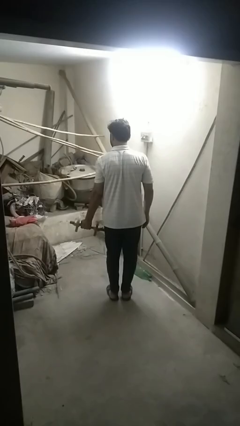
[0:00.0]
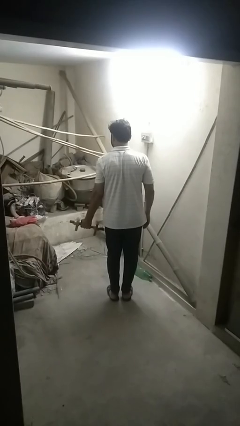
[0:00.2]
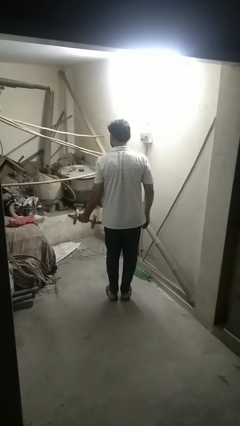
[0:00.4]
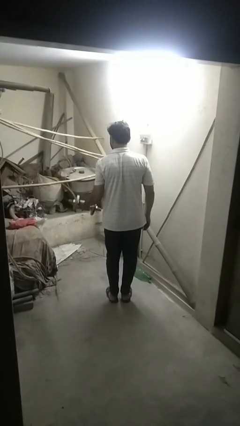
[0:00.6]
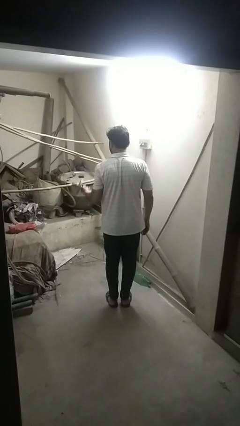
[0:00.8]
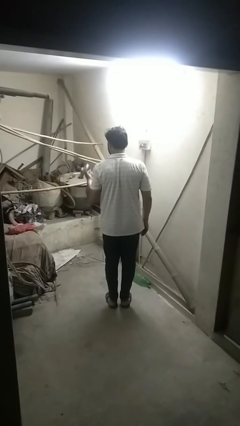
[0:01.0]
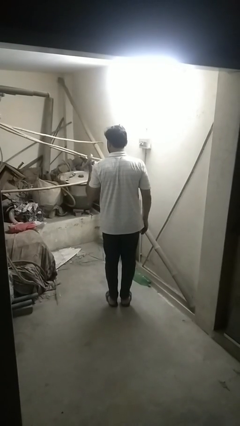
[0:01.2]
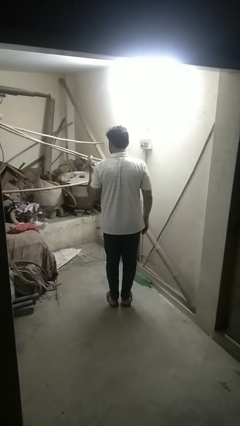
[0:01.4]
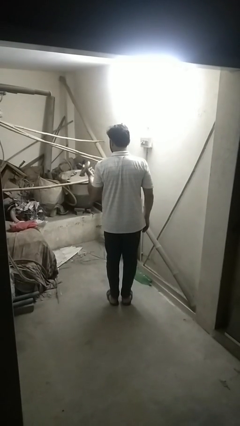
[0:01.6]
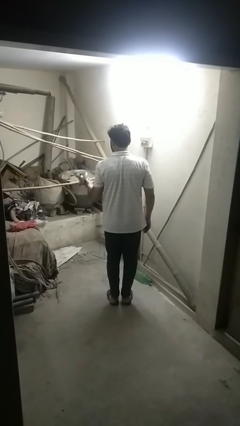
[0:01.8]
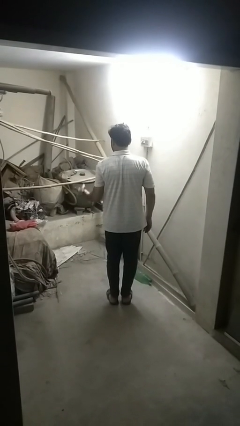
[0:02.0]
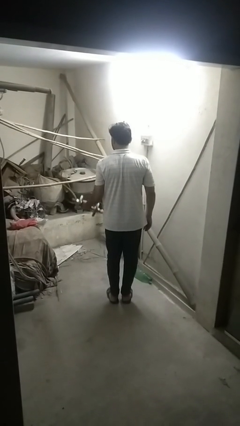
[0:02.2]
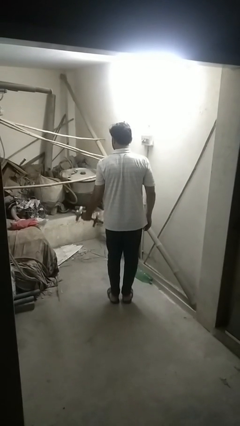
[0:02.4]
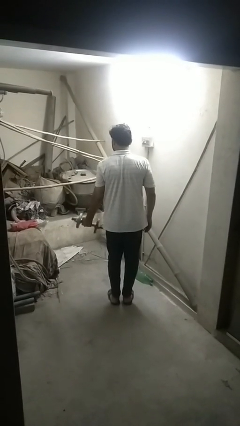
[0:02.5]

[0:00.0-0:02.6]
person lifts dumbbells

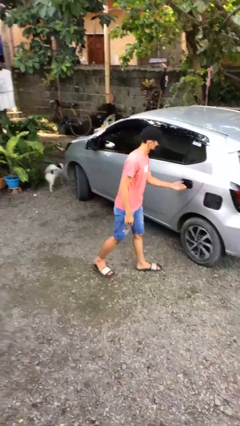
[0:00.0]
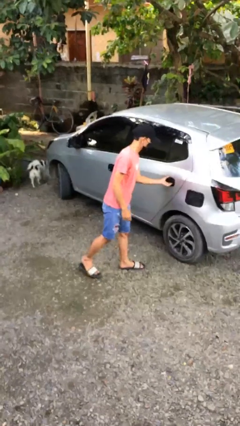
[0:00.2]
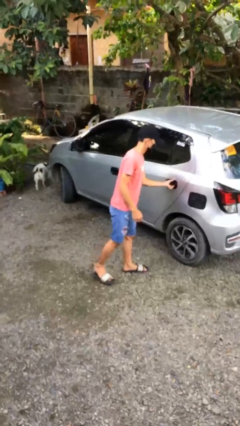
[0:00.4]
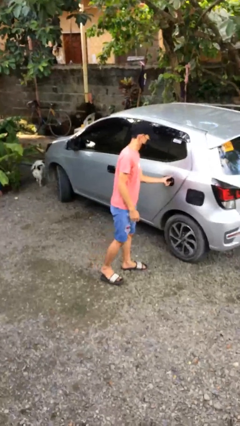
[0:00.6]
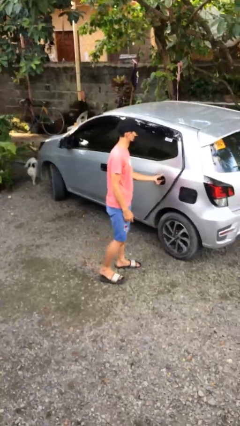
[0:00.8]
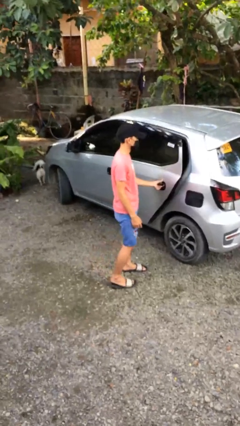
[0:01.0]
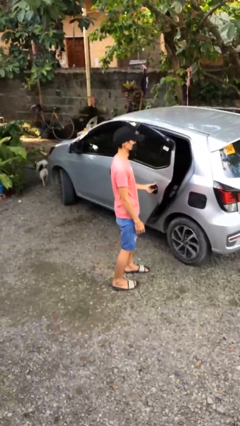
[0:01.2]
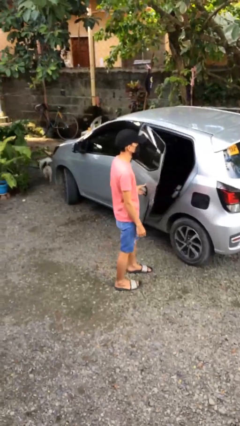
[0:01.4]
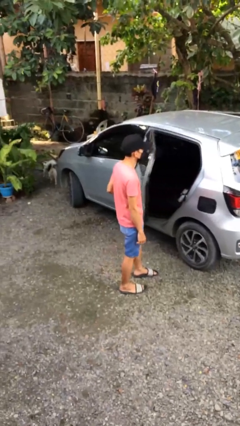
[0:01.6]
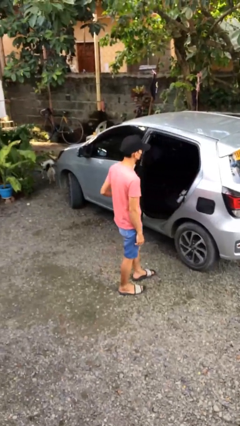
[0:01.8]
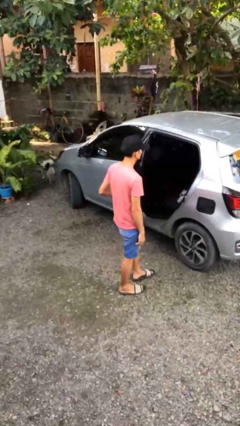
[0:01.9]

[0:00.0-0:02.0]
person opens car door

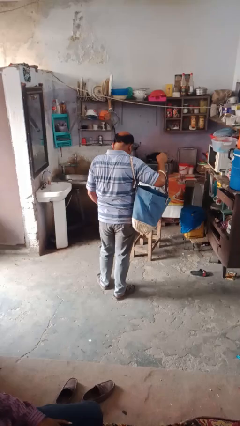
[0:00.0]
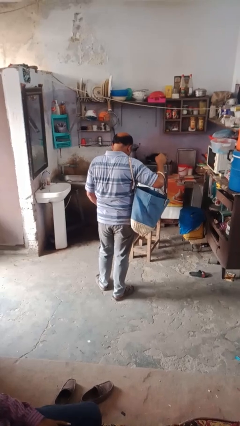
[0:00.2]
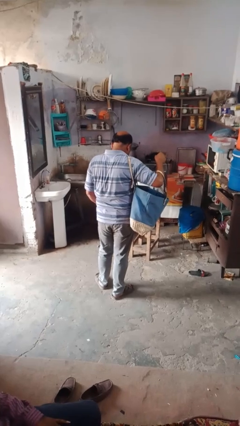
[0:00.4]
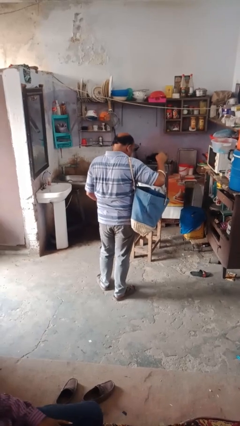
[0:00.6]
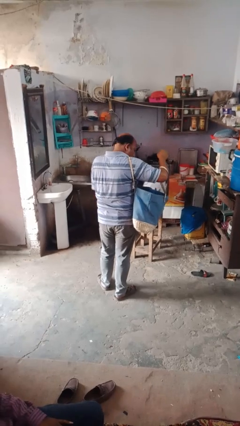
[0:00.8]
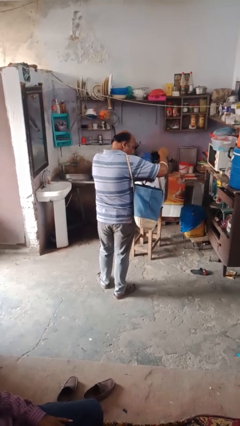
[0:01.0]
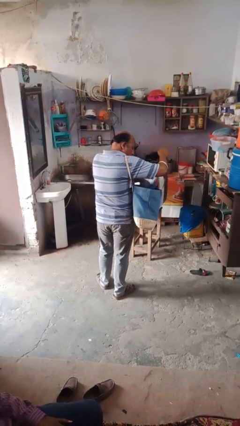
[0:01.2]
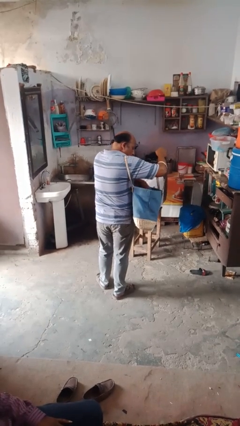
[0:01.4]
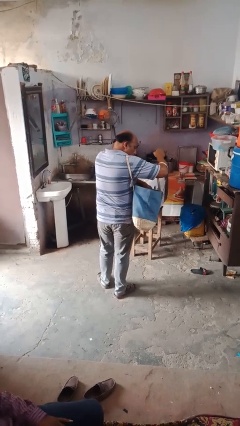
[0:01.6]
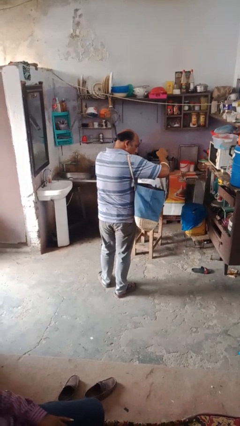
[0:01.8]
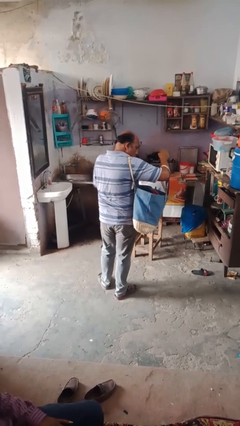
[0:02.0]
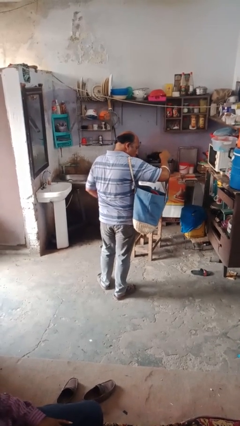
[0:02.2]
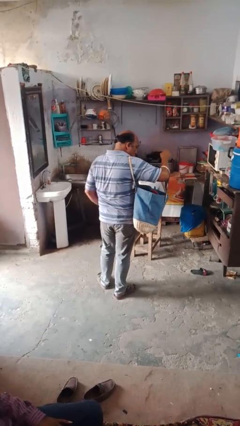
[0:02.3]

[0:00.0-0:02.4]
person puts object into bag

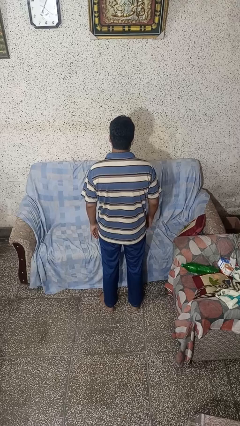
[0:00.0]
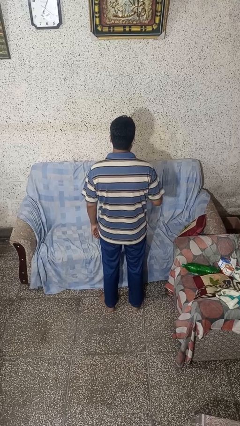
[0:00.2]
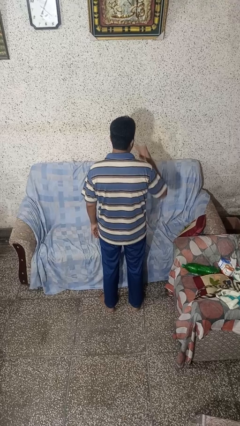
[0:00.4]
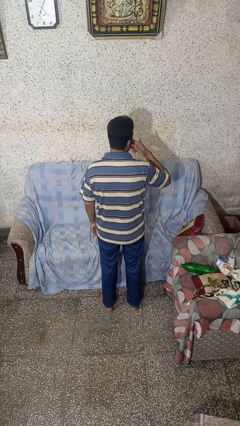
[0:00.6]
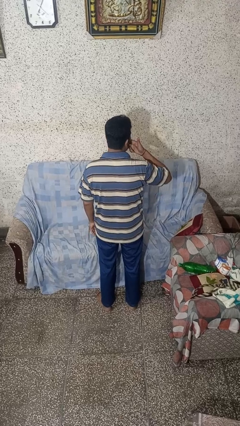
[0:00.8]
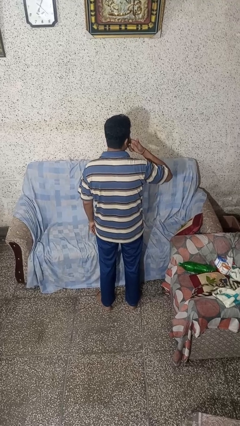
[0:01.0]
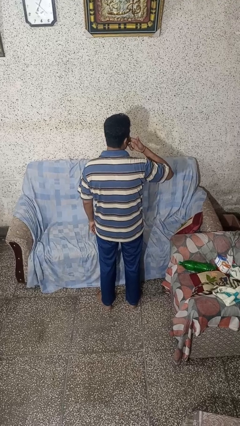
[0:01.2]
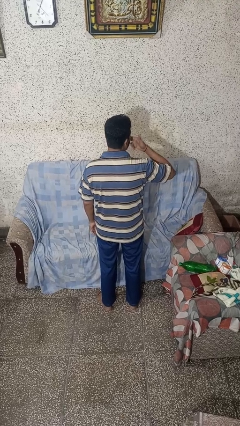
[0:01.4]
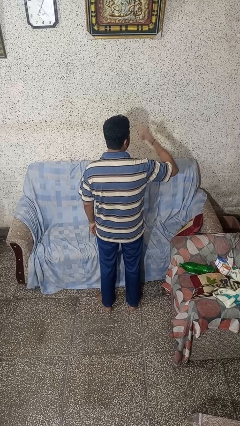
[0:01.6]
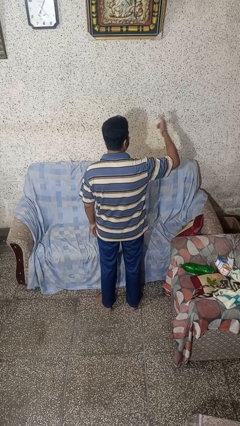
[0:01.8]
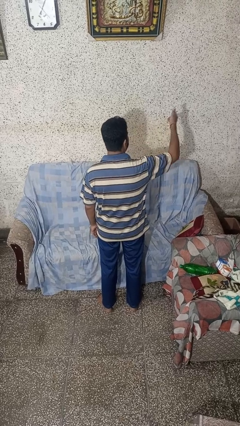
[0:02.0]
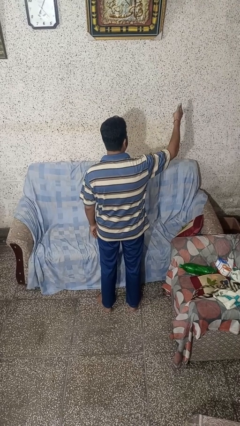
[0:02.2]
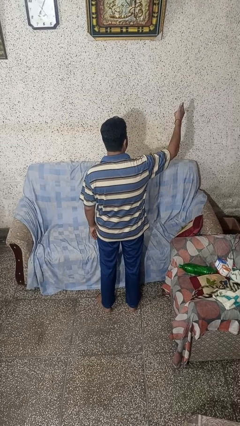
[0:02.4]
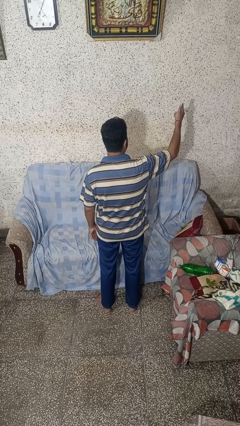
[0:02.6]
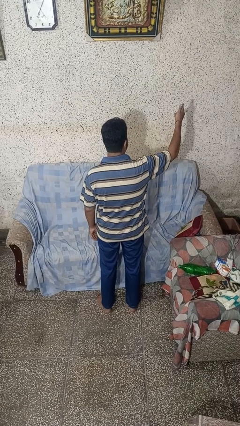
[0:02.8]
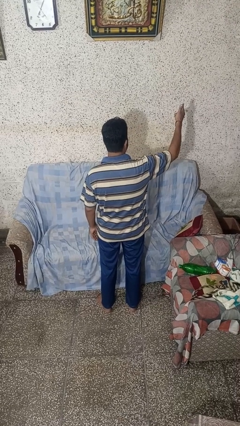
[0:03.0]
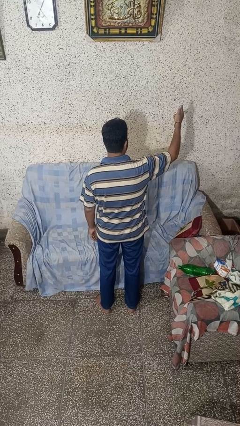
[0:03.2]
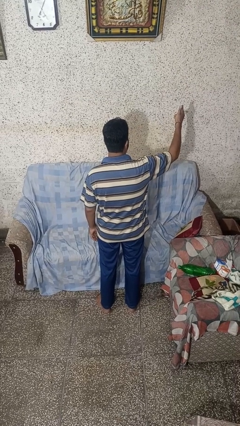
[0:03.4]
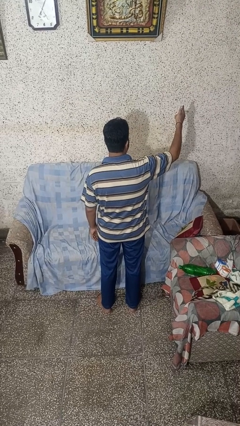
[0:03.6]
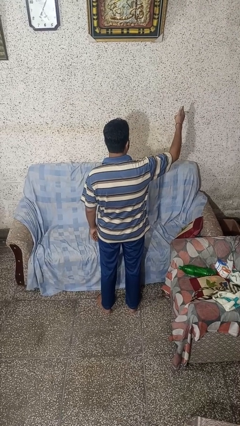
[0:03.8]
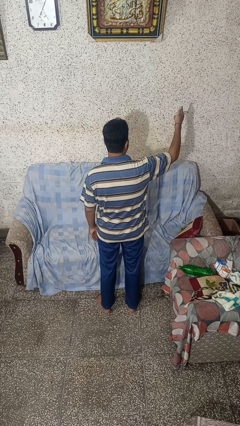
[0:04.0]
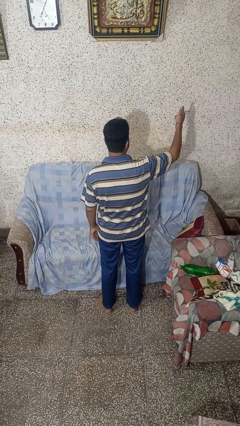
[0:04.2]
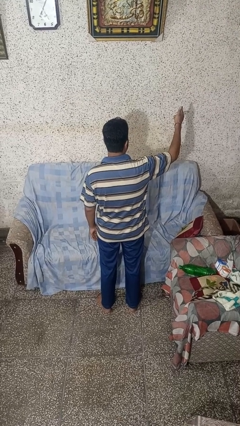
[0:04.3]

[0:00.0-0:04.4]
person gestures blow kiss

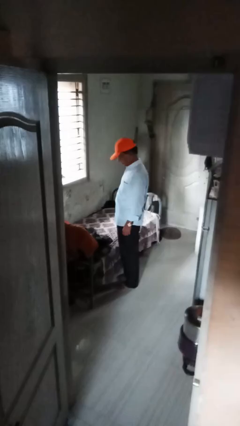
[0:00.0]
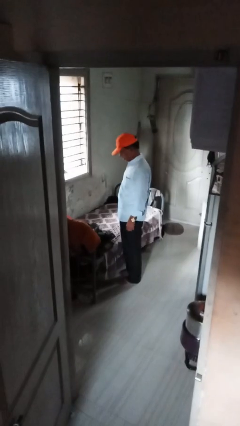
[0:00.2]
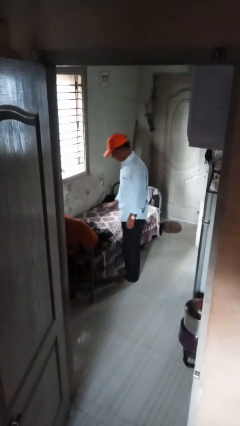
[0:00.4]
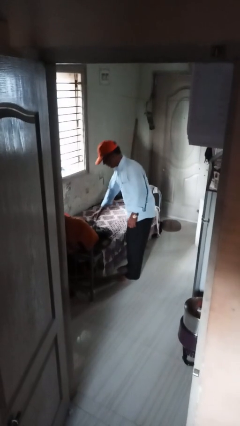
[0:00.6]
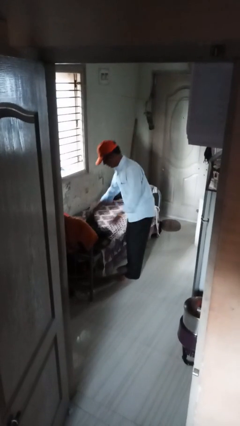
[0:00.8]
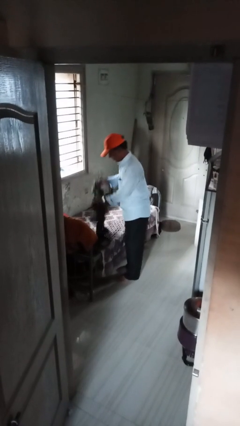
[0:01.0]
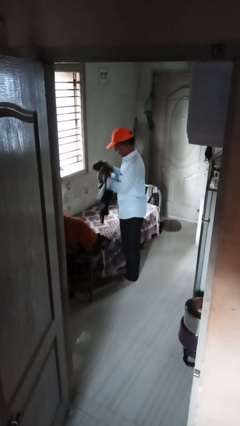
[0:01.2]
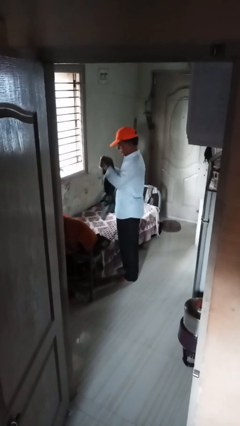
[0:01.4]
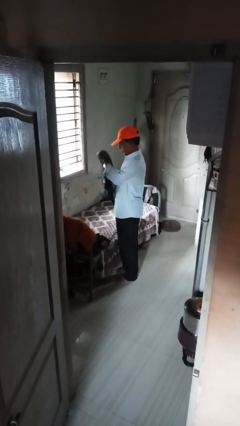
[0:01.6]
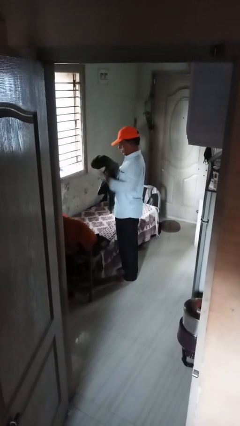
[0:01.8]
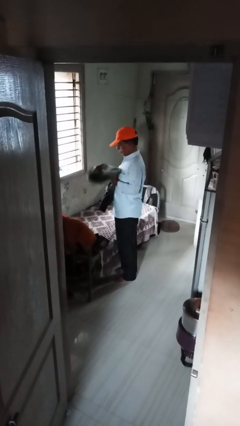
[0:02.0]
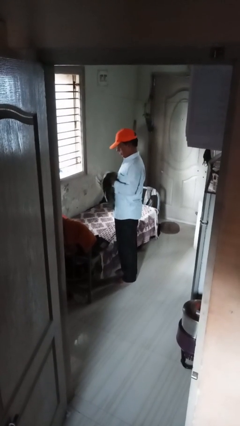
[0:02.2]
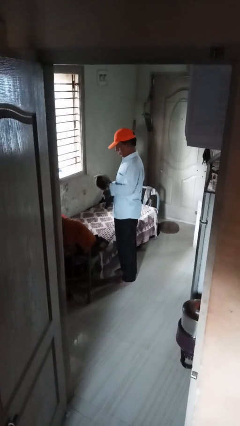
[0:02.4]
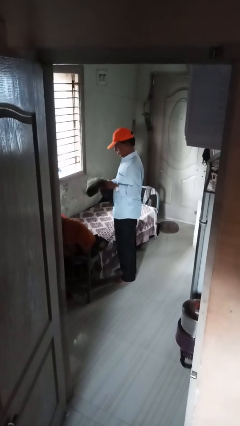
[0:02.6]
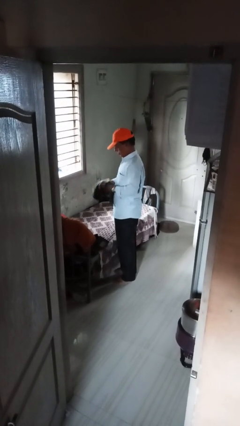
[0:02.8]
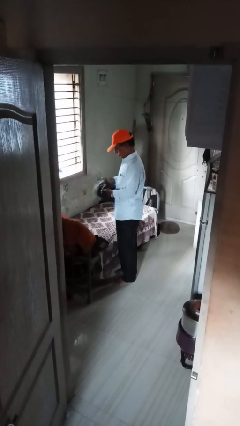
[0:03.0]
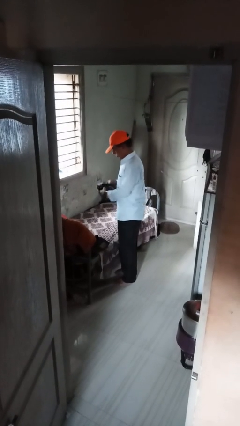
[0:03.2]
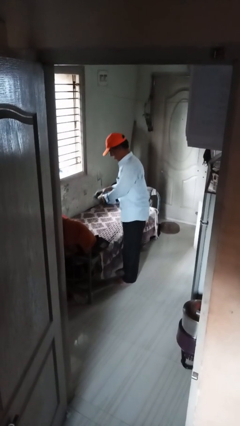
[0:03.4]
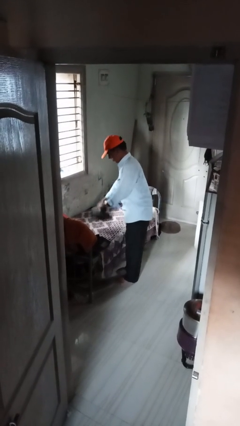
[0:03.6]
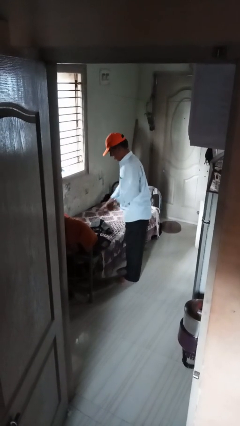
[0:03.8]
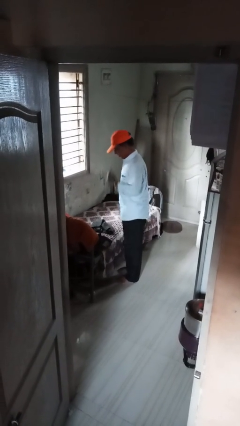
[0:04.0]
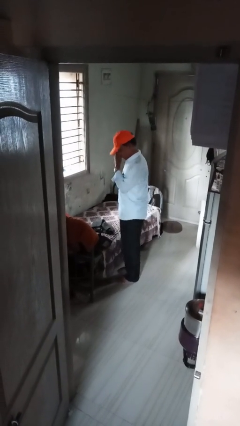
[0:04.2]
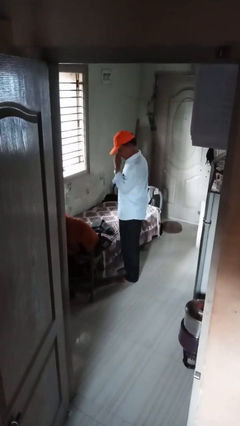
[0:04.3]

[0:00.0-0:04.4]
person folds shirt

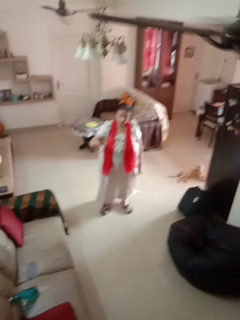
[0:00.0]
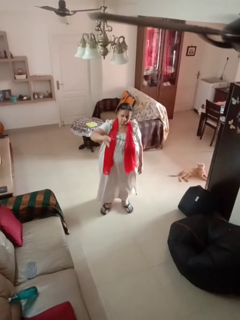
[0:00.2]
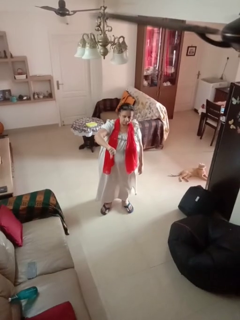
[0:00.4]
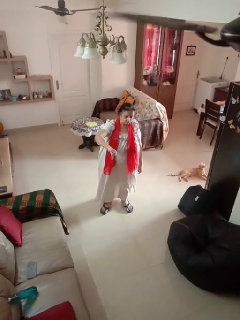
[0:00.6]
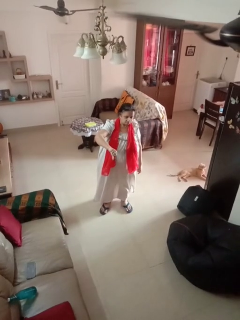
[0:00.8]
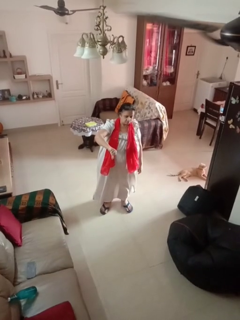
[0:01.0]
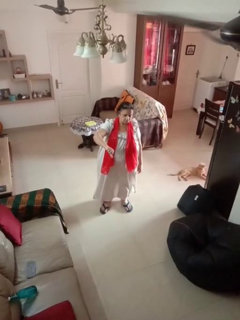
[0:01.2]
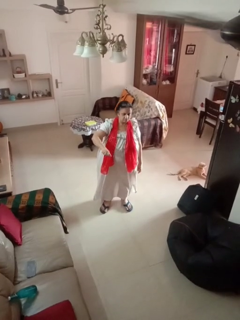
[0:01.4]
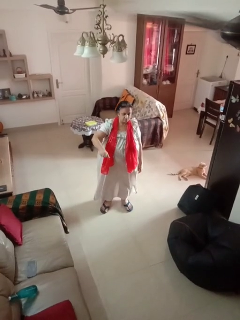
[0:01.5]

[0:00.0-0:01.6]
person gestures thumbs down

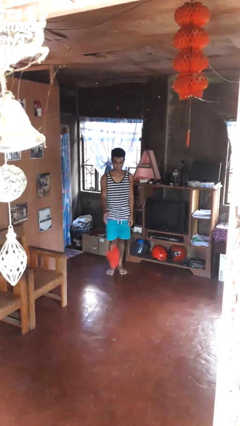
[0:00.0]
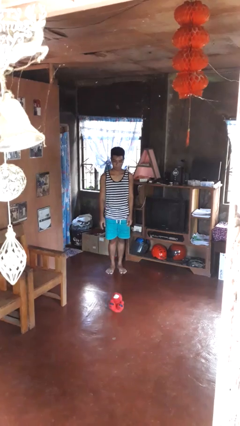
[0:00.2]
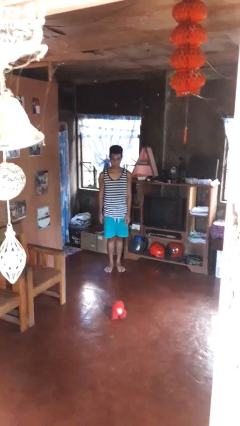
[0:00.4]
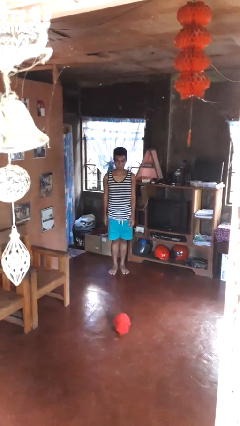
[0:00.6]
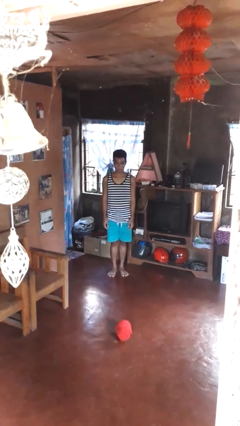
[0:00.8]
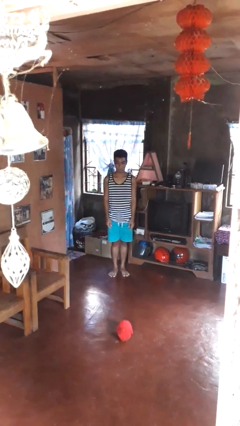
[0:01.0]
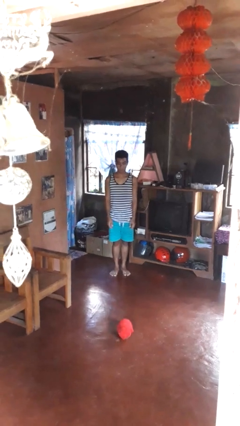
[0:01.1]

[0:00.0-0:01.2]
person throws object to ground
